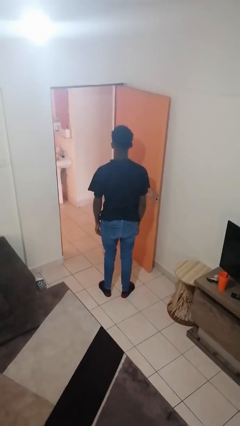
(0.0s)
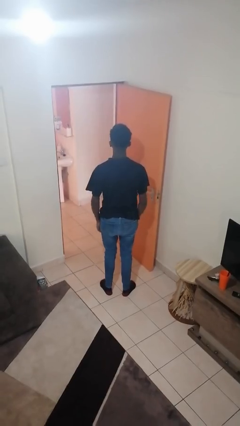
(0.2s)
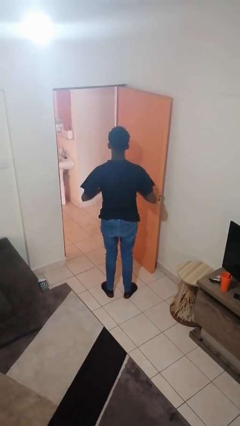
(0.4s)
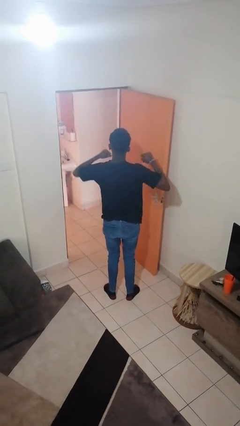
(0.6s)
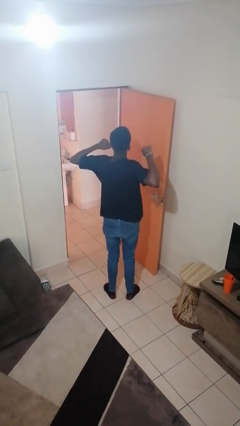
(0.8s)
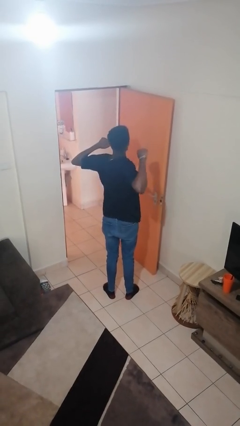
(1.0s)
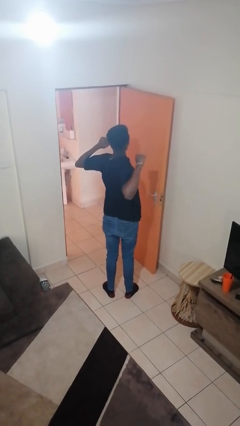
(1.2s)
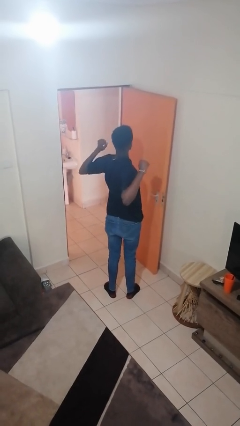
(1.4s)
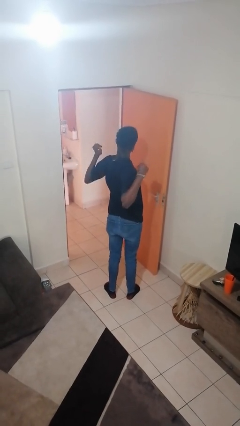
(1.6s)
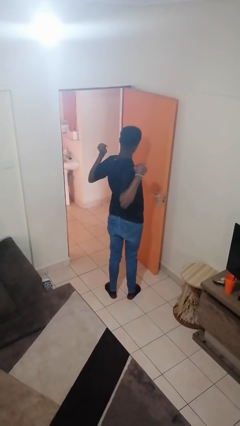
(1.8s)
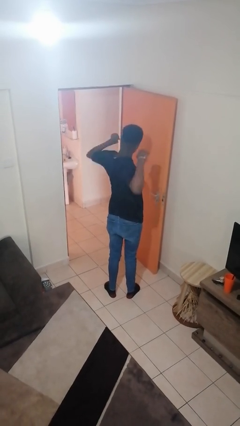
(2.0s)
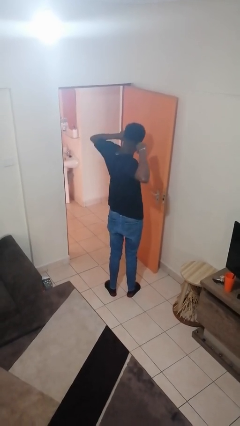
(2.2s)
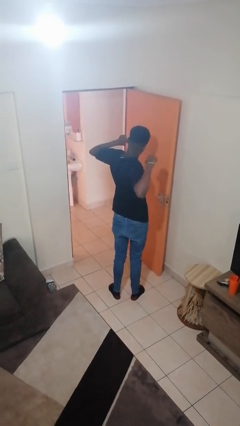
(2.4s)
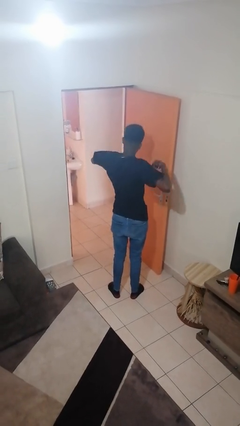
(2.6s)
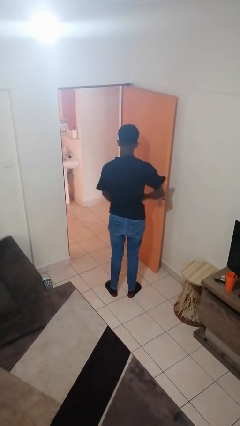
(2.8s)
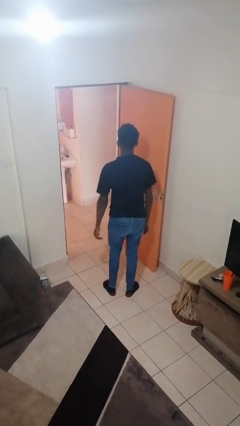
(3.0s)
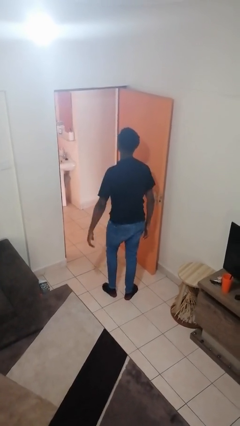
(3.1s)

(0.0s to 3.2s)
person stretches arms to side

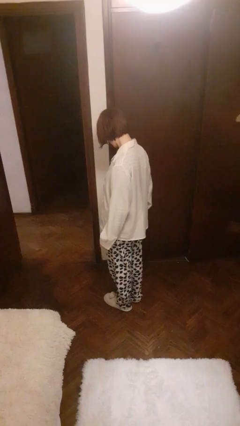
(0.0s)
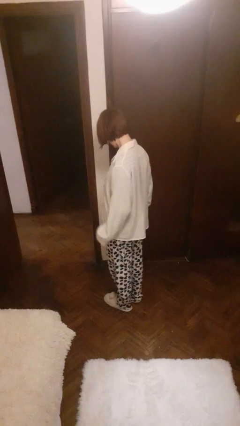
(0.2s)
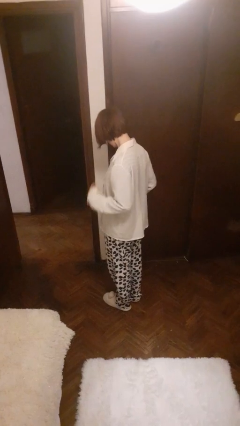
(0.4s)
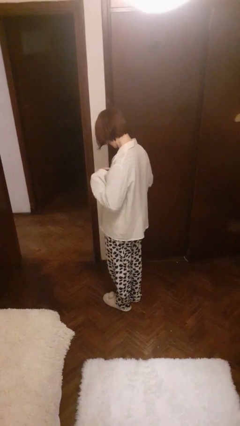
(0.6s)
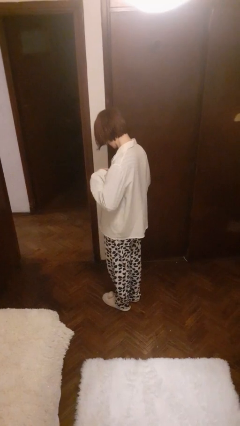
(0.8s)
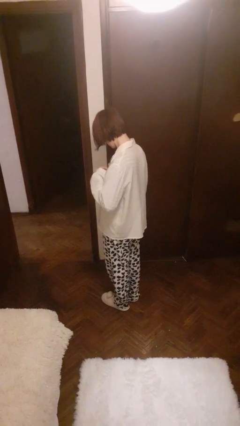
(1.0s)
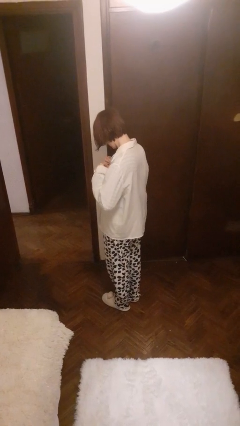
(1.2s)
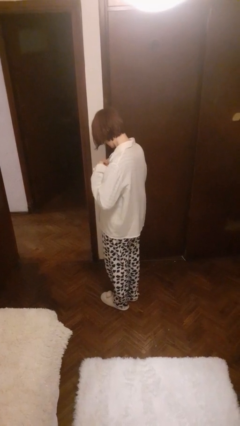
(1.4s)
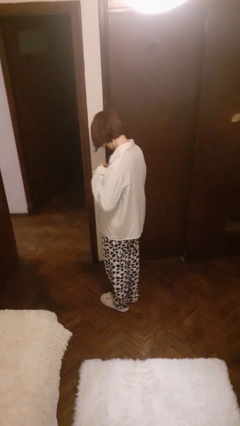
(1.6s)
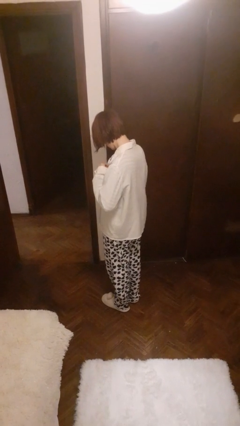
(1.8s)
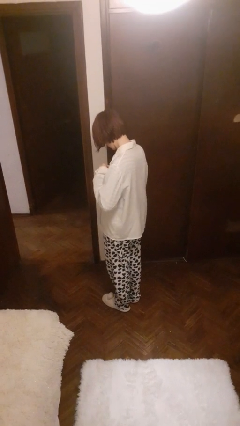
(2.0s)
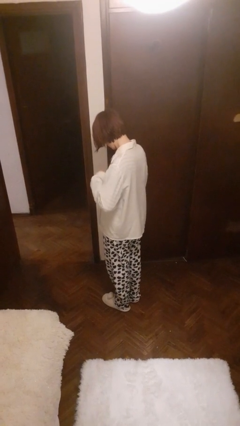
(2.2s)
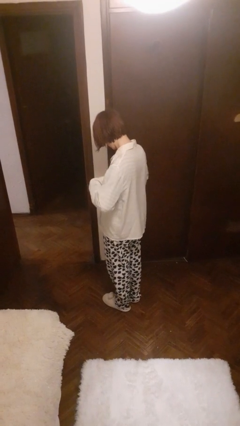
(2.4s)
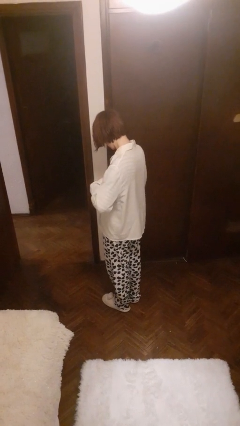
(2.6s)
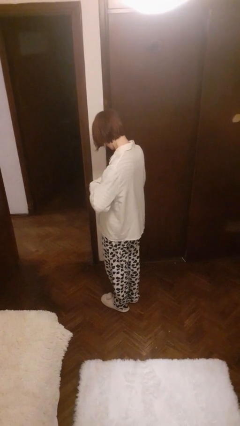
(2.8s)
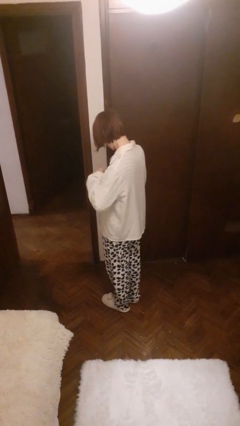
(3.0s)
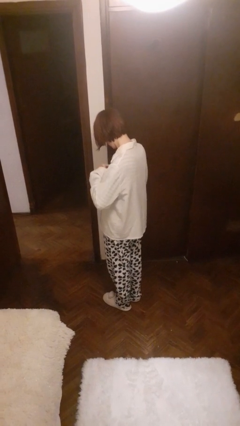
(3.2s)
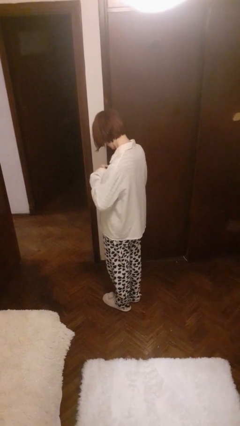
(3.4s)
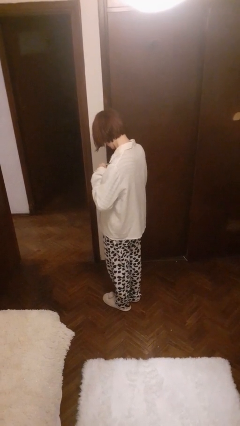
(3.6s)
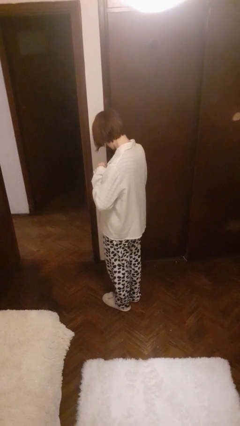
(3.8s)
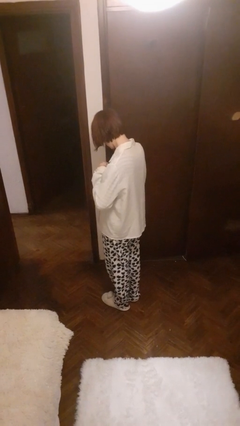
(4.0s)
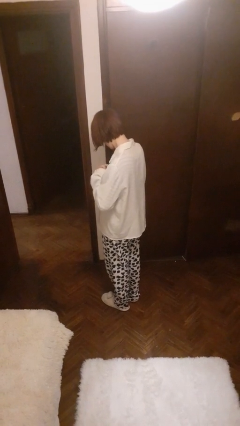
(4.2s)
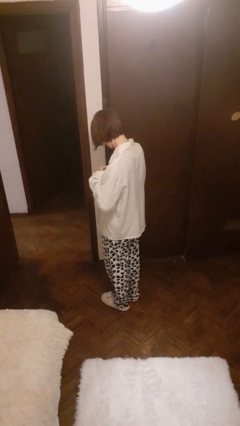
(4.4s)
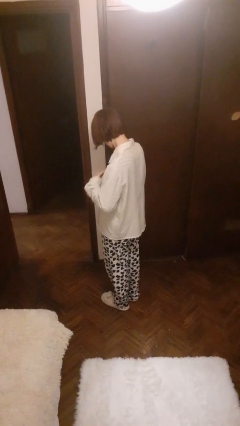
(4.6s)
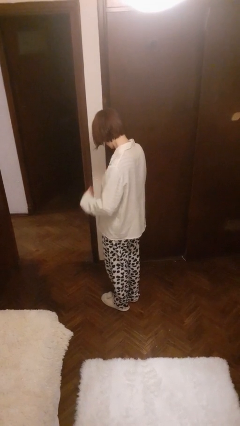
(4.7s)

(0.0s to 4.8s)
person buttons shirt

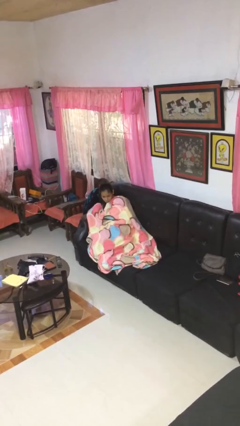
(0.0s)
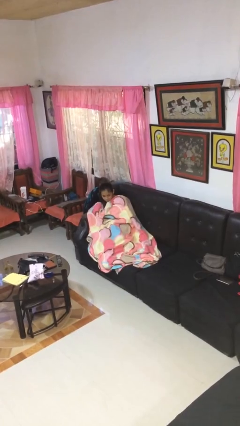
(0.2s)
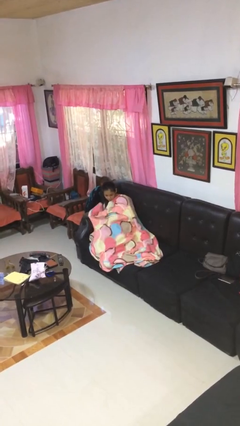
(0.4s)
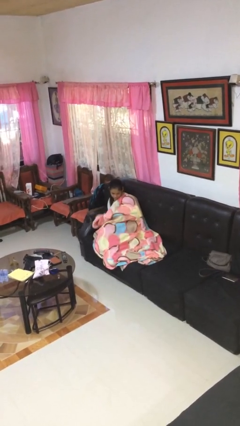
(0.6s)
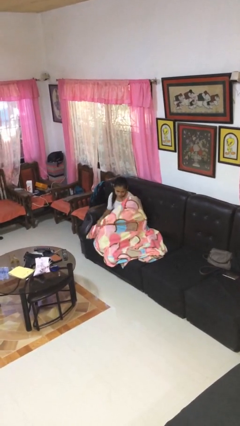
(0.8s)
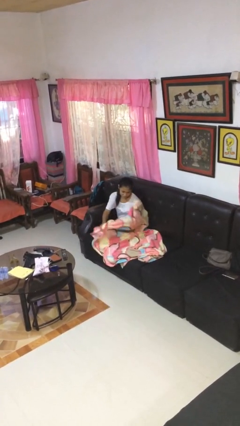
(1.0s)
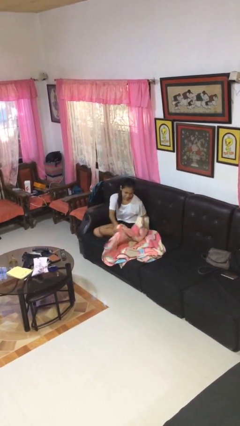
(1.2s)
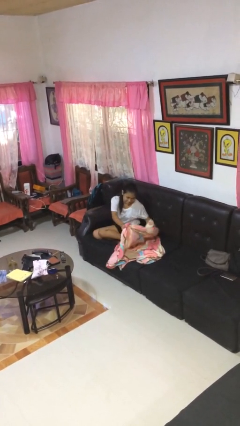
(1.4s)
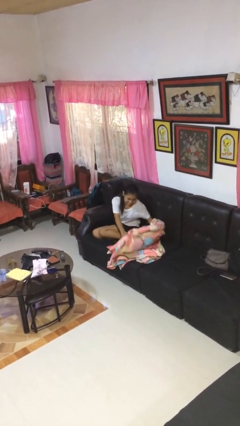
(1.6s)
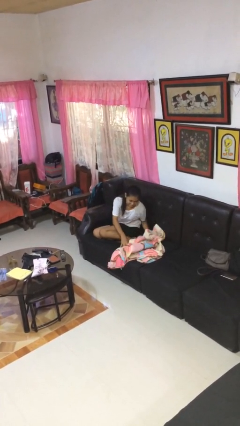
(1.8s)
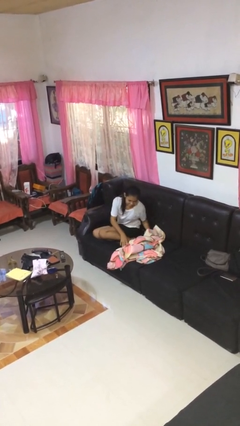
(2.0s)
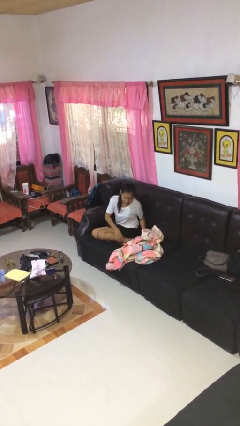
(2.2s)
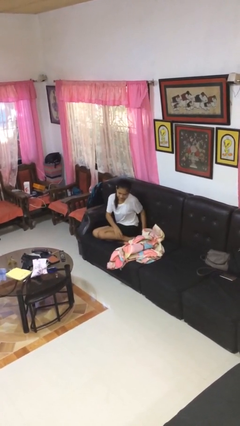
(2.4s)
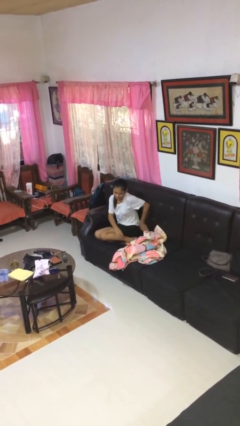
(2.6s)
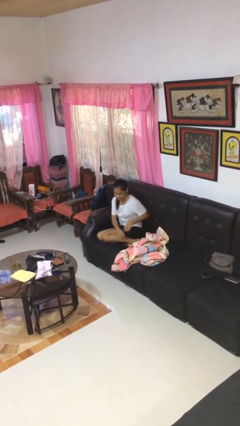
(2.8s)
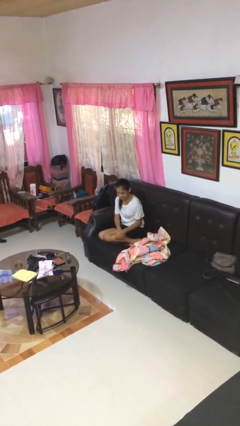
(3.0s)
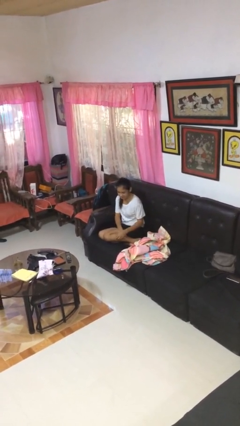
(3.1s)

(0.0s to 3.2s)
person uncovers with blanket

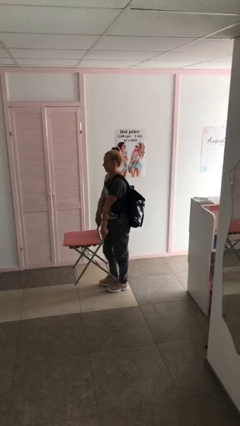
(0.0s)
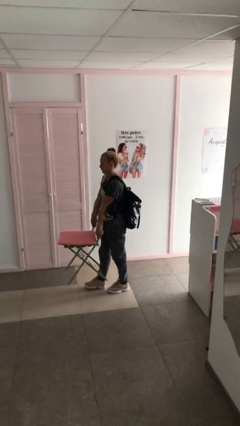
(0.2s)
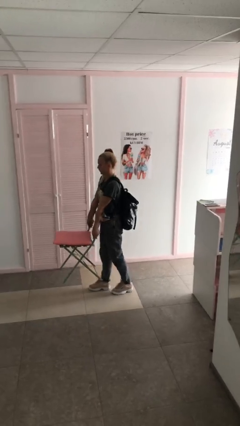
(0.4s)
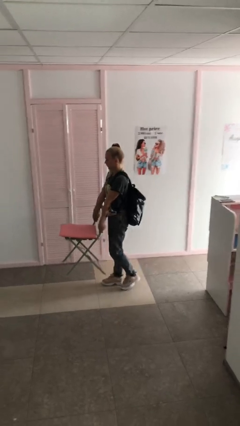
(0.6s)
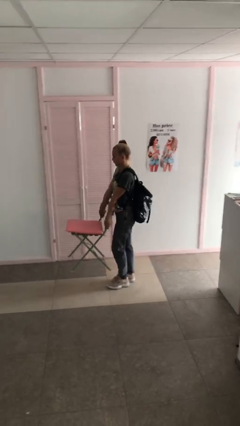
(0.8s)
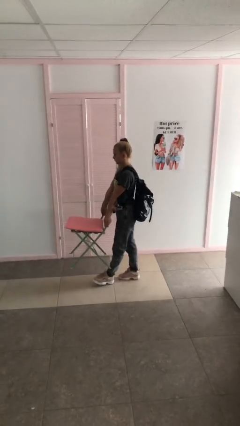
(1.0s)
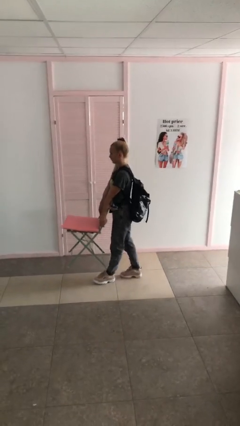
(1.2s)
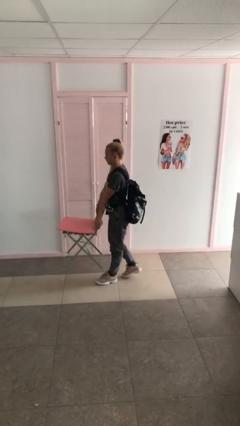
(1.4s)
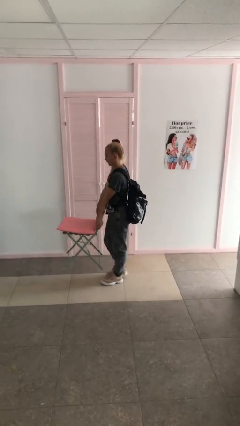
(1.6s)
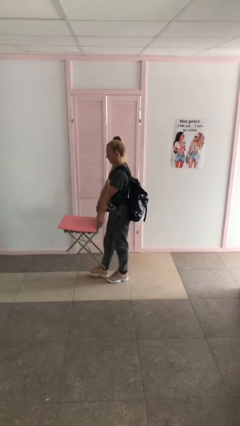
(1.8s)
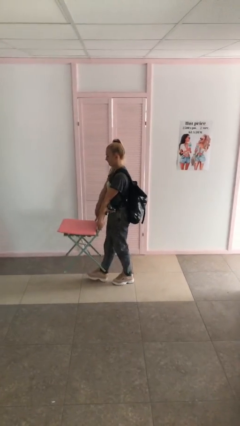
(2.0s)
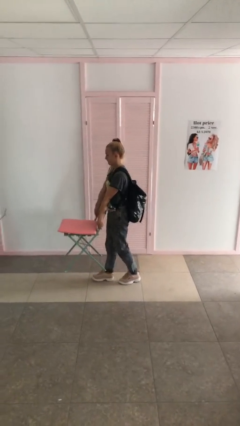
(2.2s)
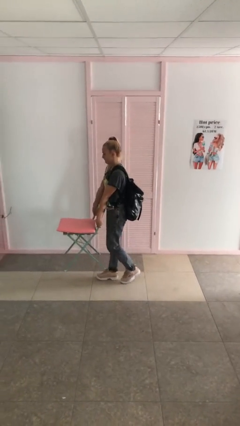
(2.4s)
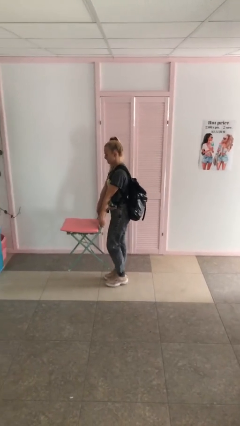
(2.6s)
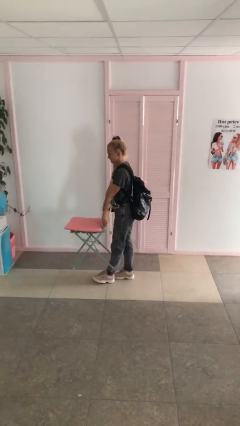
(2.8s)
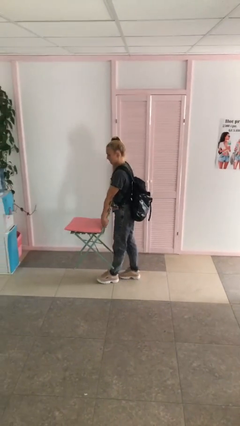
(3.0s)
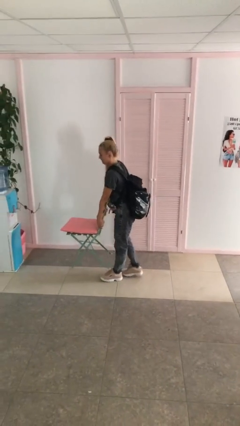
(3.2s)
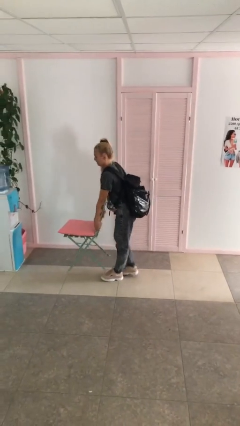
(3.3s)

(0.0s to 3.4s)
person carries heavy object

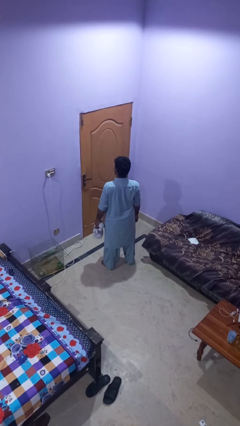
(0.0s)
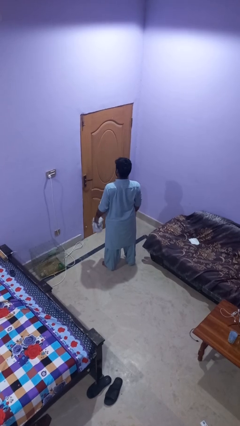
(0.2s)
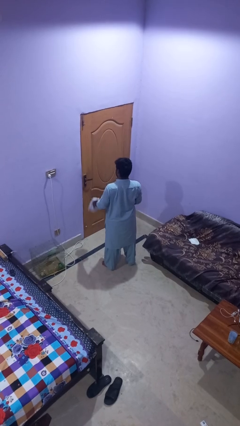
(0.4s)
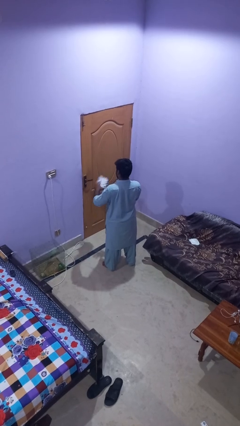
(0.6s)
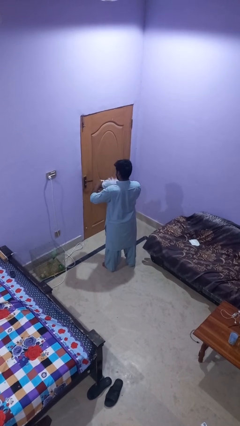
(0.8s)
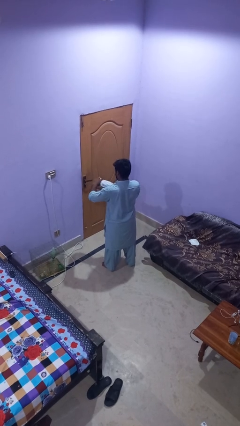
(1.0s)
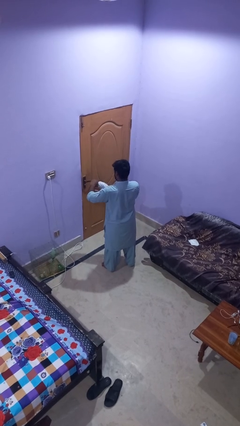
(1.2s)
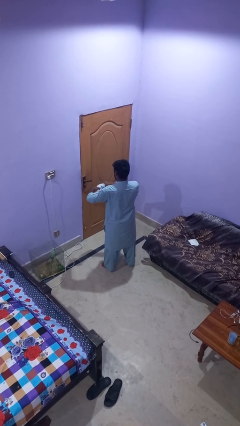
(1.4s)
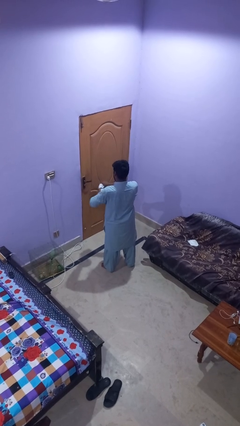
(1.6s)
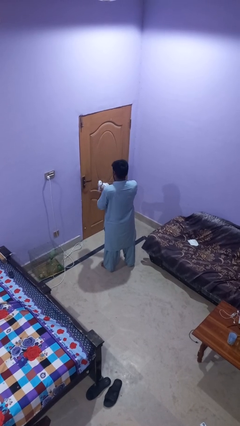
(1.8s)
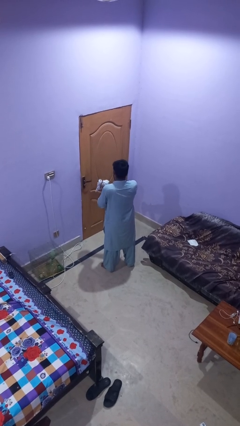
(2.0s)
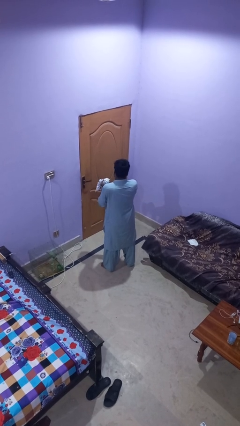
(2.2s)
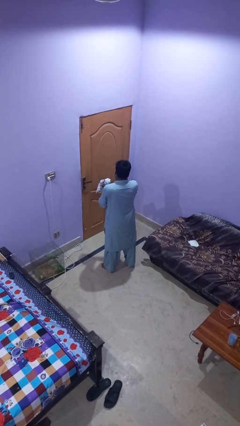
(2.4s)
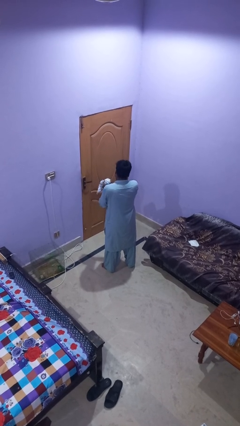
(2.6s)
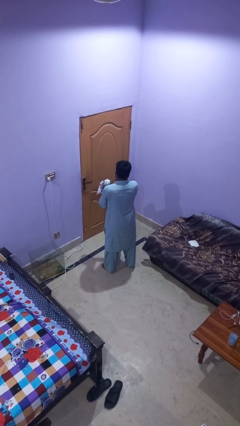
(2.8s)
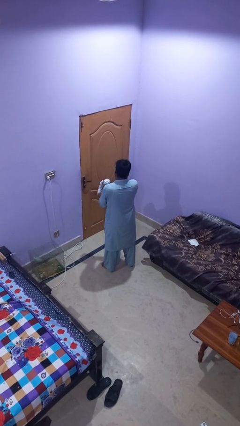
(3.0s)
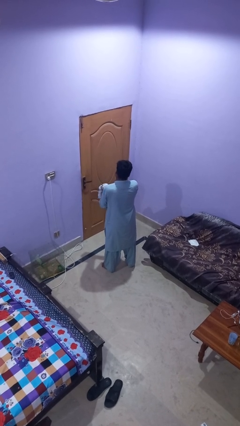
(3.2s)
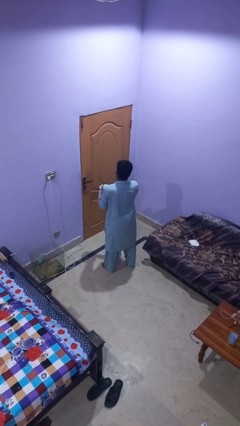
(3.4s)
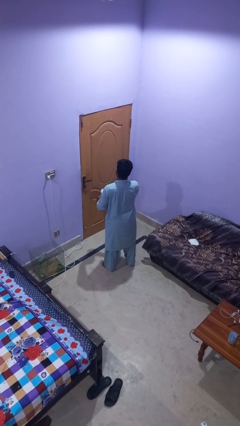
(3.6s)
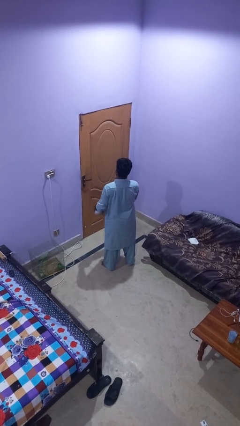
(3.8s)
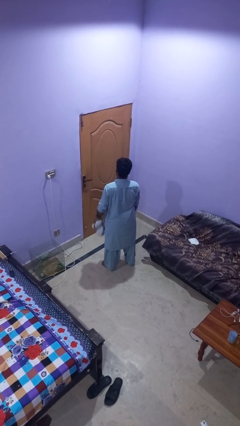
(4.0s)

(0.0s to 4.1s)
person squeezes object
